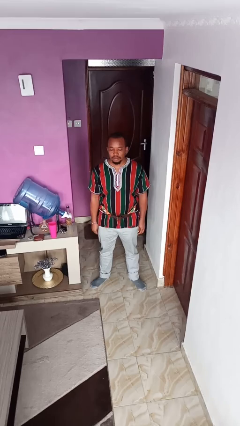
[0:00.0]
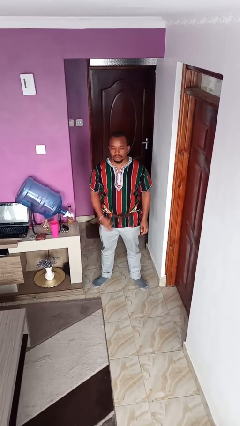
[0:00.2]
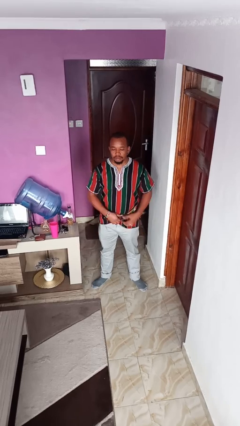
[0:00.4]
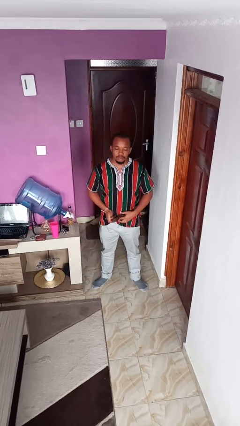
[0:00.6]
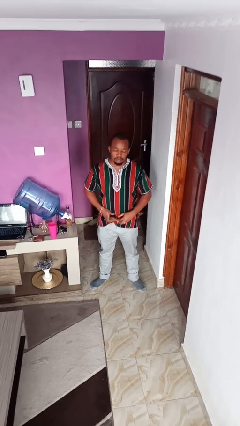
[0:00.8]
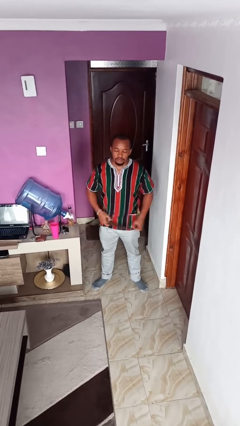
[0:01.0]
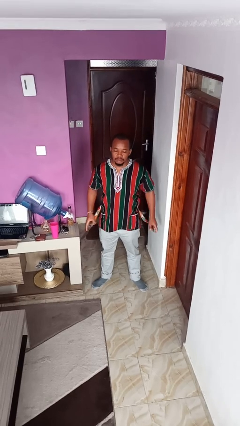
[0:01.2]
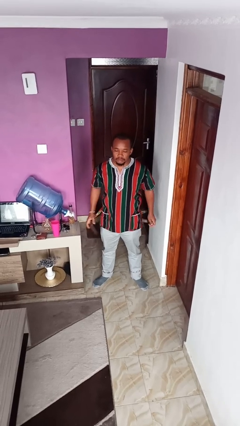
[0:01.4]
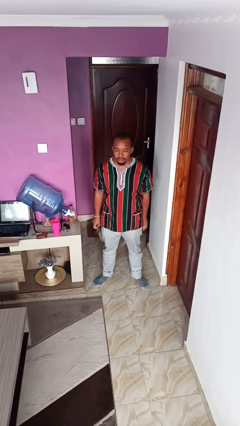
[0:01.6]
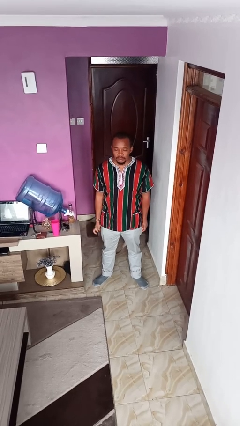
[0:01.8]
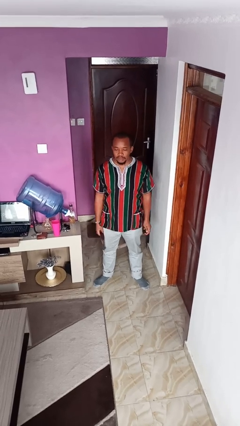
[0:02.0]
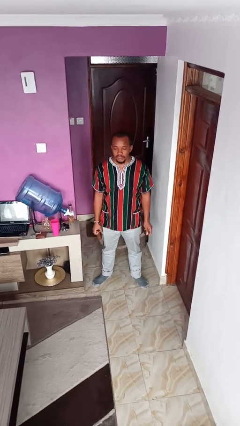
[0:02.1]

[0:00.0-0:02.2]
person takes off belt

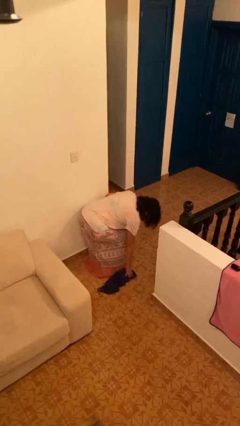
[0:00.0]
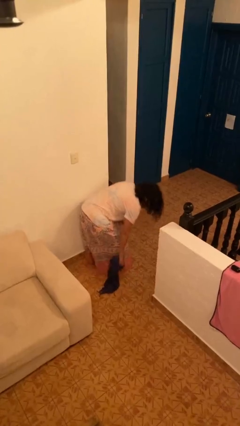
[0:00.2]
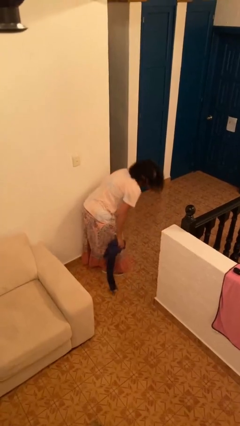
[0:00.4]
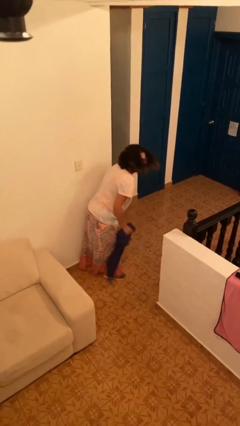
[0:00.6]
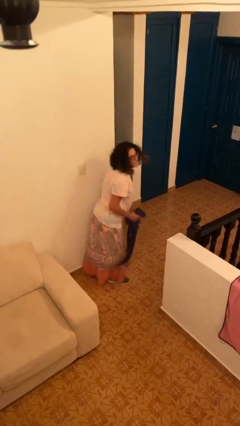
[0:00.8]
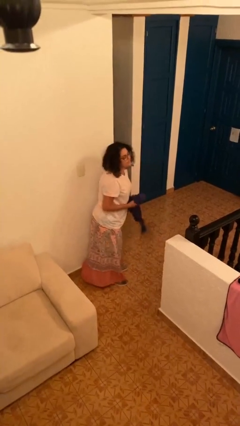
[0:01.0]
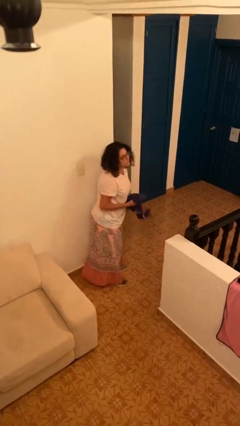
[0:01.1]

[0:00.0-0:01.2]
person picks up object from floor

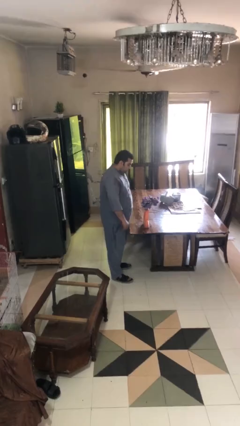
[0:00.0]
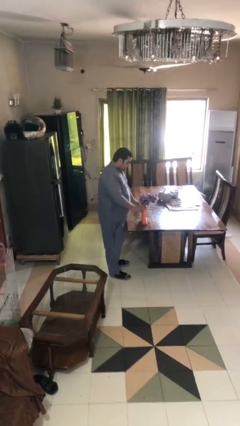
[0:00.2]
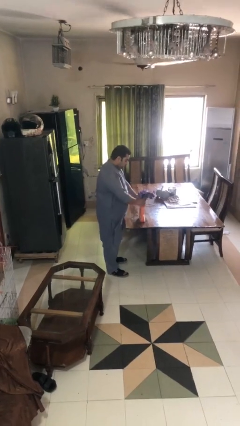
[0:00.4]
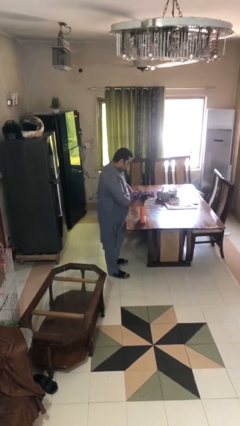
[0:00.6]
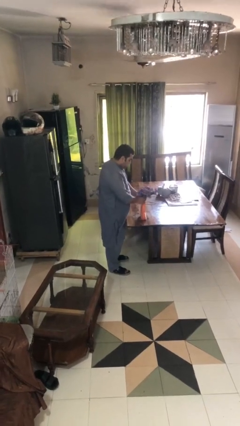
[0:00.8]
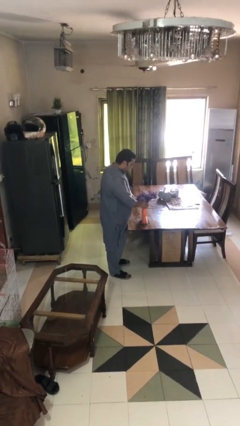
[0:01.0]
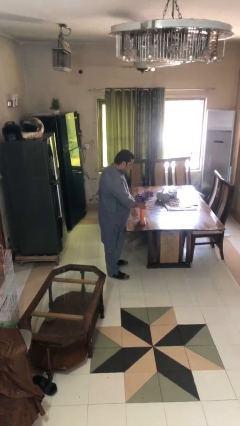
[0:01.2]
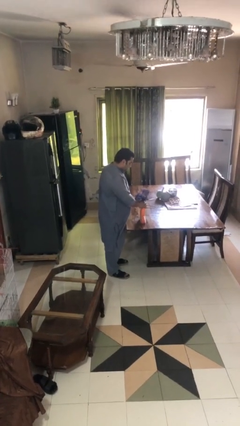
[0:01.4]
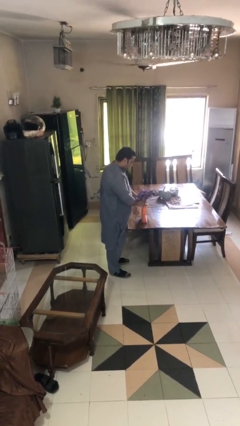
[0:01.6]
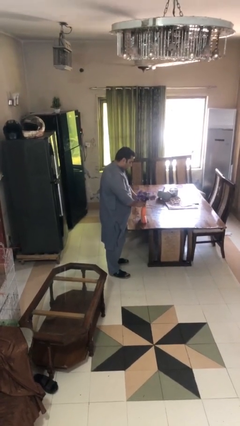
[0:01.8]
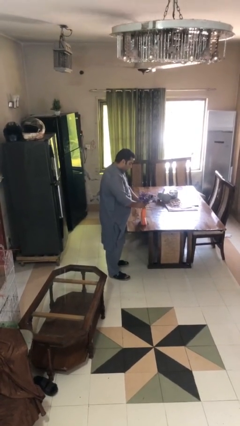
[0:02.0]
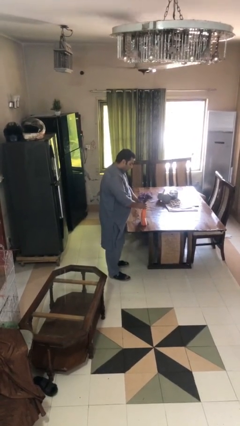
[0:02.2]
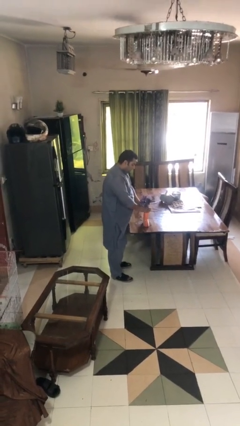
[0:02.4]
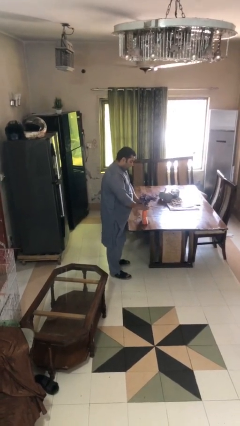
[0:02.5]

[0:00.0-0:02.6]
person arranges flowers in vase

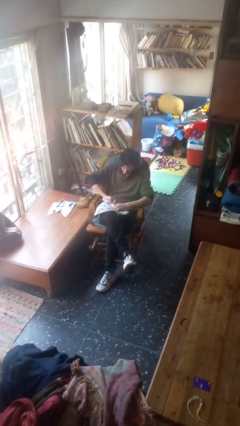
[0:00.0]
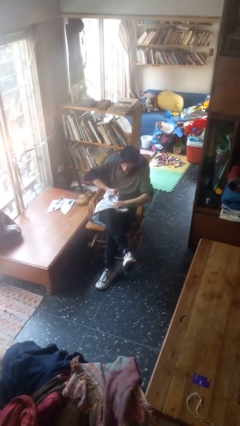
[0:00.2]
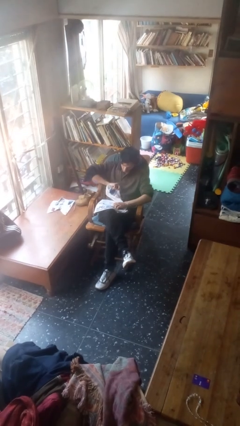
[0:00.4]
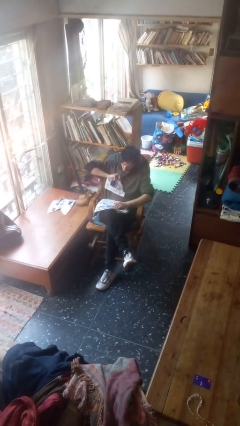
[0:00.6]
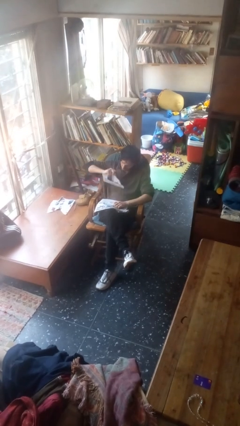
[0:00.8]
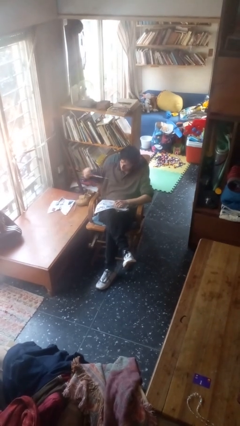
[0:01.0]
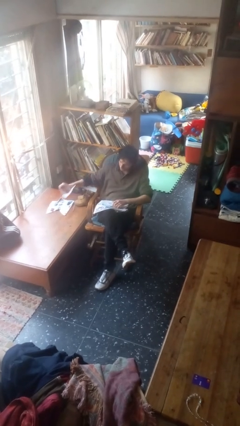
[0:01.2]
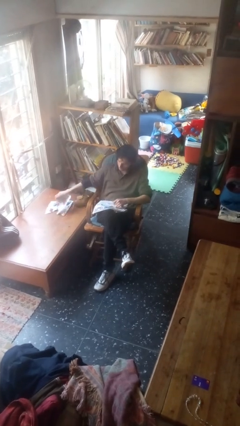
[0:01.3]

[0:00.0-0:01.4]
person tears paper

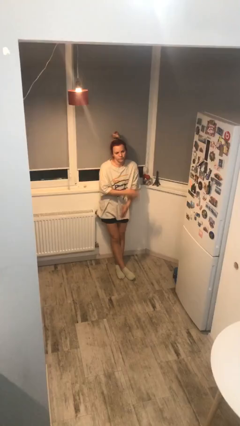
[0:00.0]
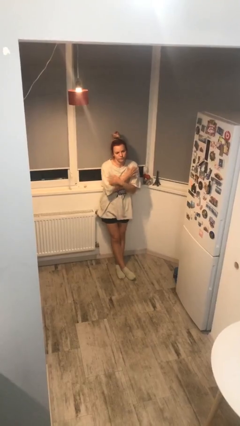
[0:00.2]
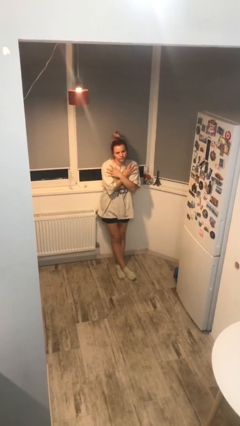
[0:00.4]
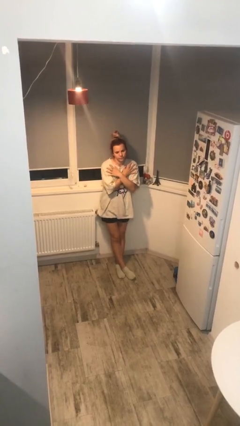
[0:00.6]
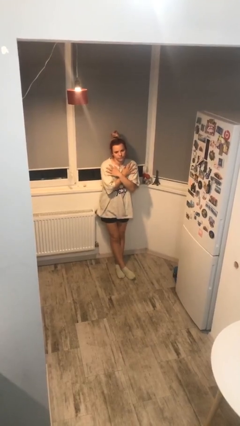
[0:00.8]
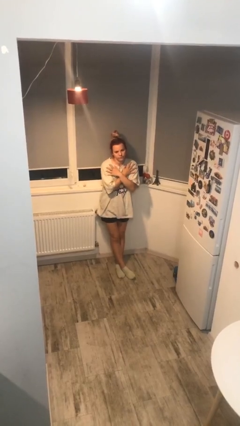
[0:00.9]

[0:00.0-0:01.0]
person crosses arms

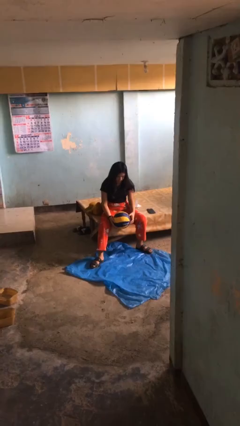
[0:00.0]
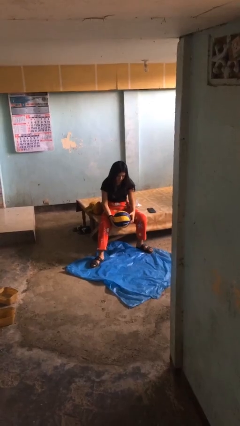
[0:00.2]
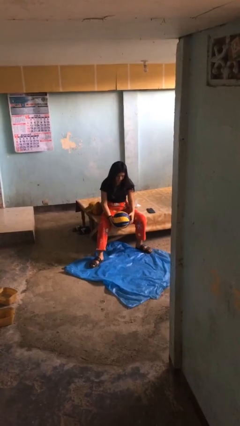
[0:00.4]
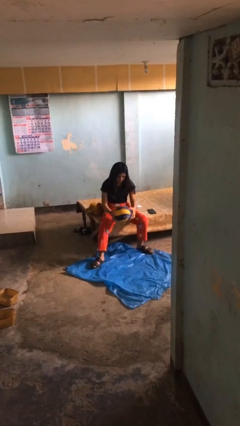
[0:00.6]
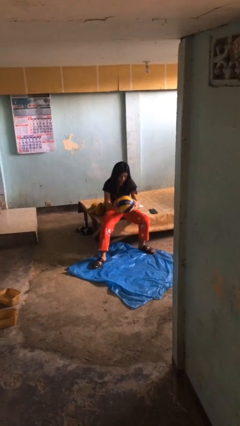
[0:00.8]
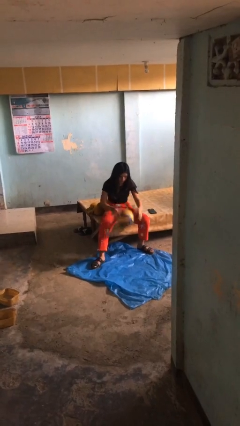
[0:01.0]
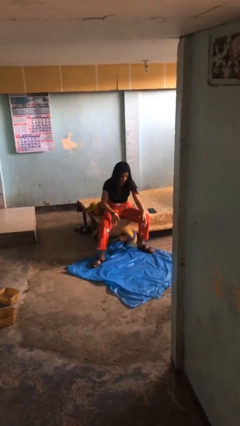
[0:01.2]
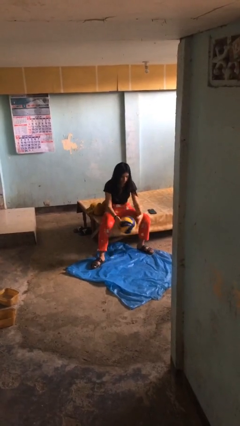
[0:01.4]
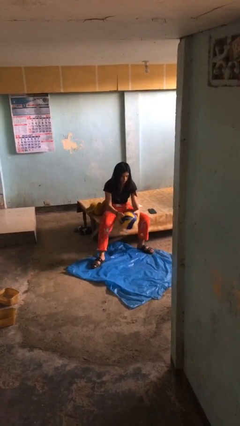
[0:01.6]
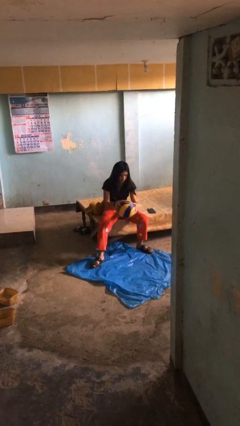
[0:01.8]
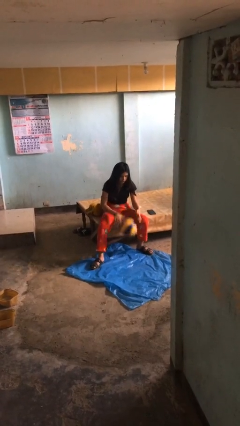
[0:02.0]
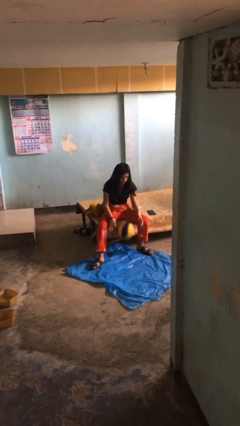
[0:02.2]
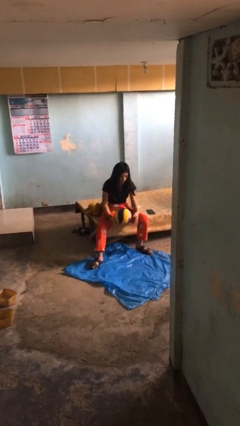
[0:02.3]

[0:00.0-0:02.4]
person bounces ball on floor

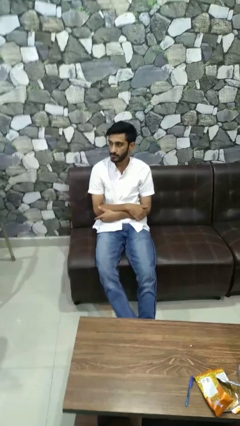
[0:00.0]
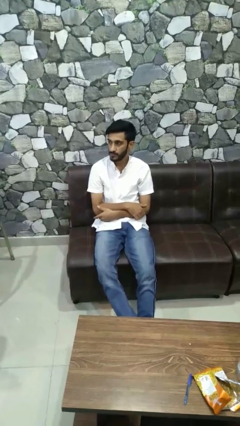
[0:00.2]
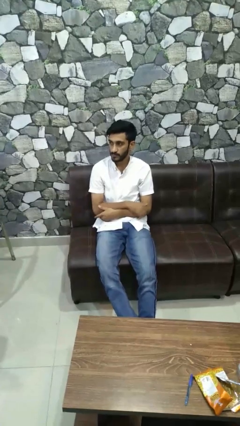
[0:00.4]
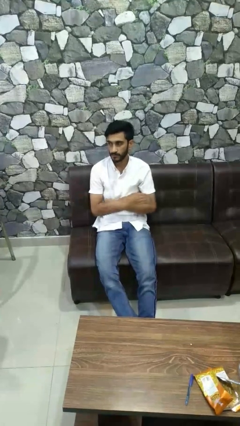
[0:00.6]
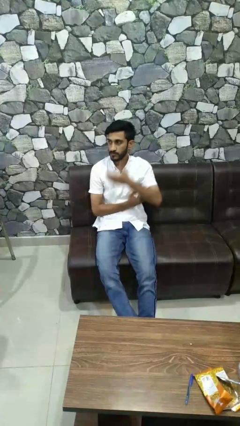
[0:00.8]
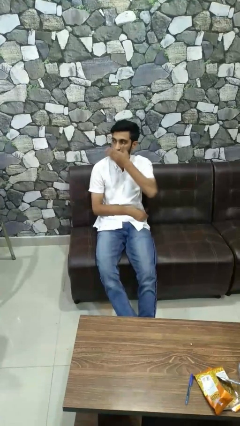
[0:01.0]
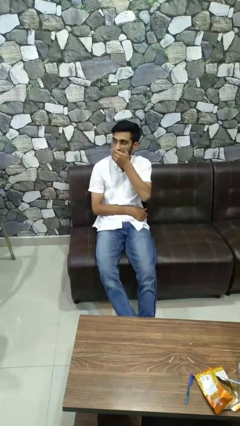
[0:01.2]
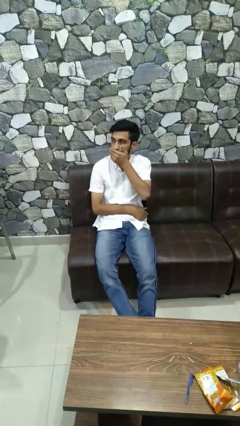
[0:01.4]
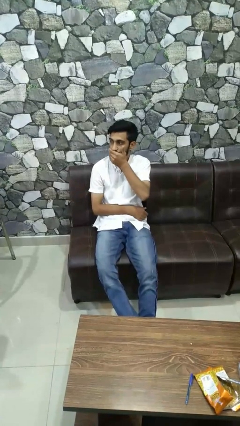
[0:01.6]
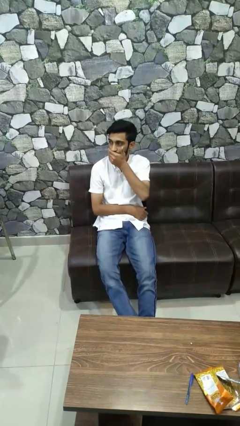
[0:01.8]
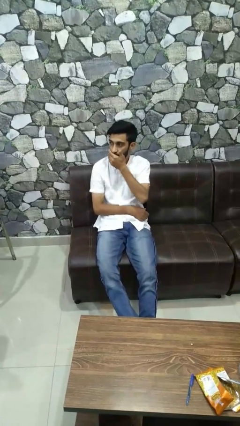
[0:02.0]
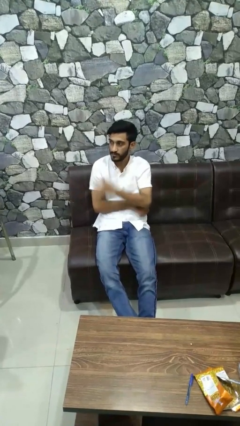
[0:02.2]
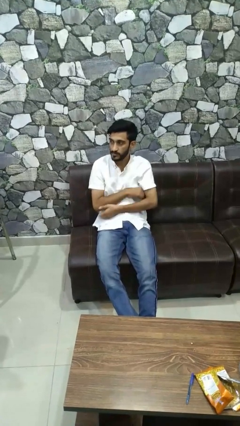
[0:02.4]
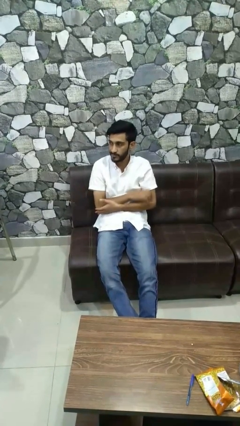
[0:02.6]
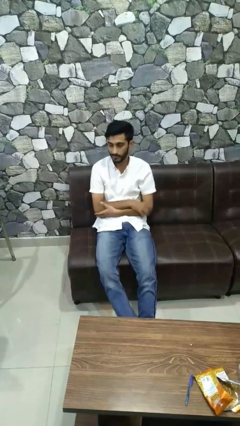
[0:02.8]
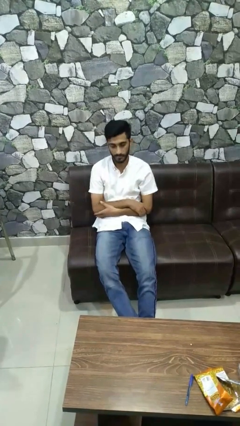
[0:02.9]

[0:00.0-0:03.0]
person covers face with hands

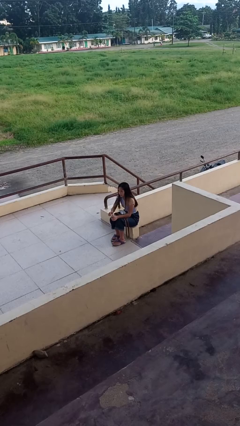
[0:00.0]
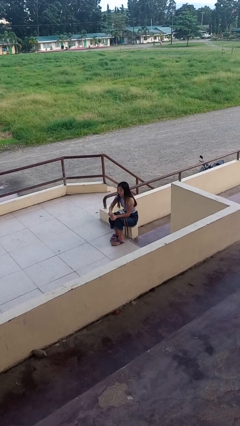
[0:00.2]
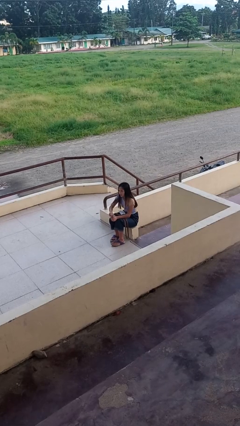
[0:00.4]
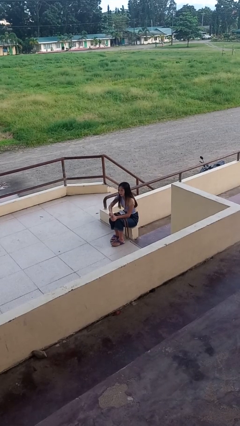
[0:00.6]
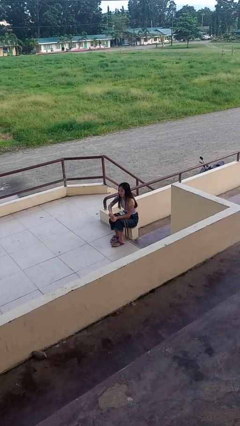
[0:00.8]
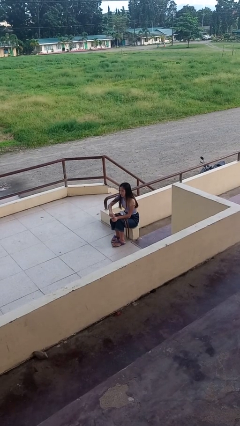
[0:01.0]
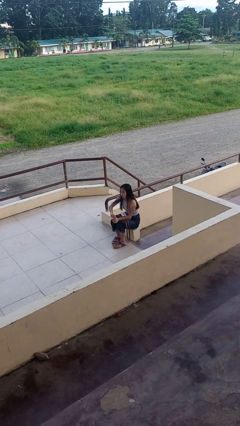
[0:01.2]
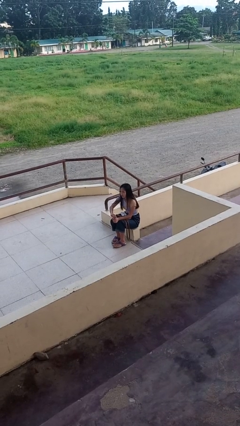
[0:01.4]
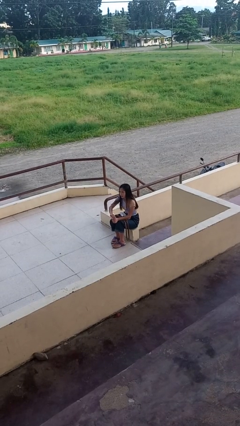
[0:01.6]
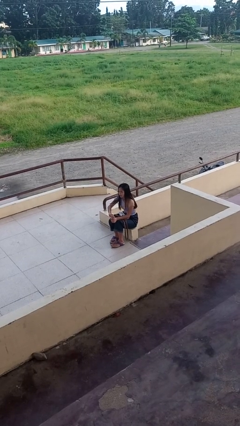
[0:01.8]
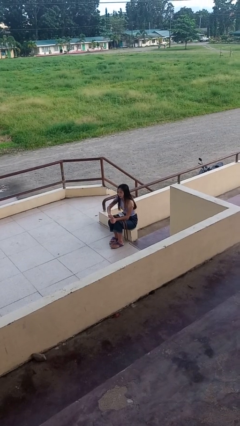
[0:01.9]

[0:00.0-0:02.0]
person opens beverage can

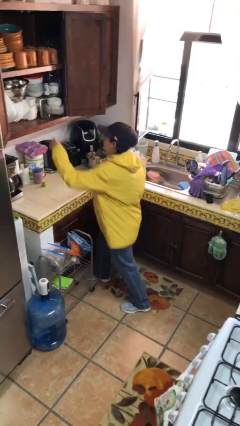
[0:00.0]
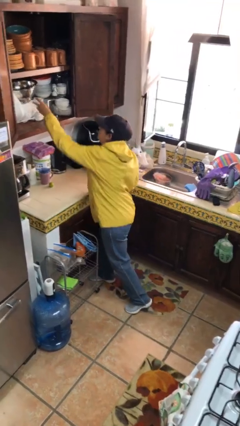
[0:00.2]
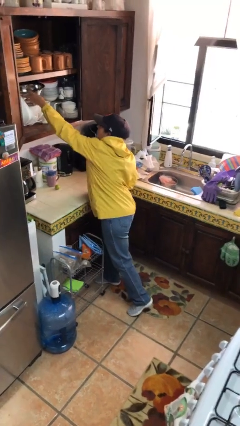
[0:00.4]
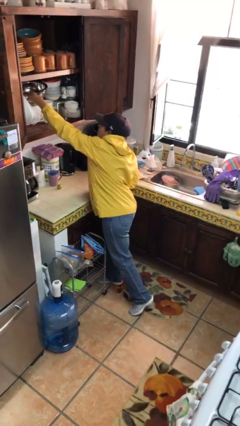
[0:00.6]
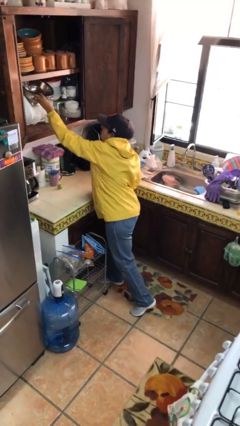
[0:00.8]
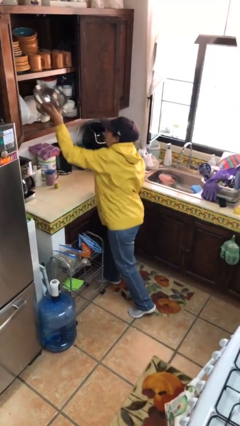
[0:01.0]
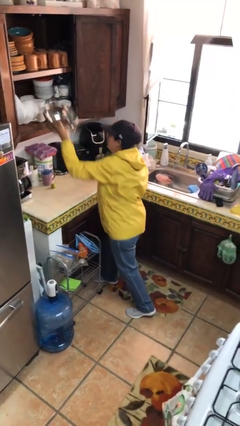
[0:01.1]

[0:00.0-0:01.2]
person picks up object from cabinet
